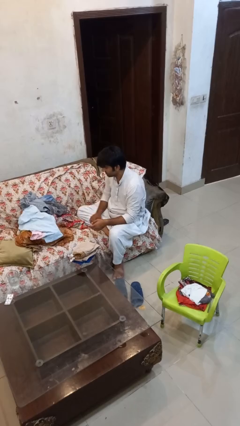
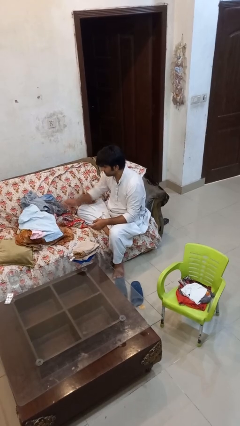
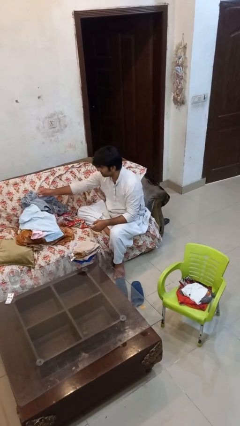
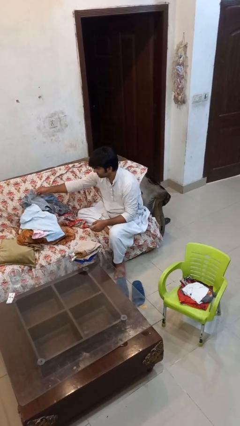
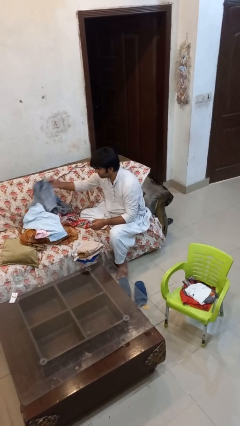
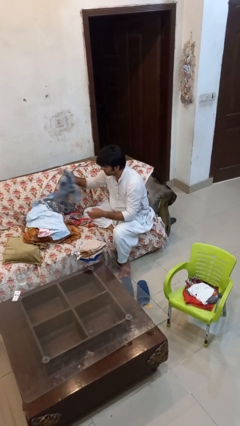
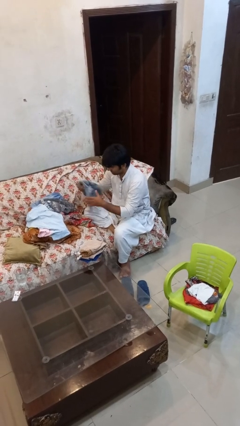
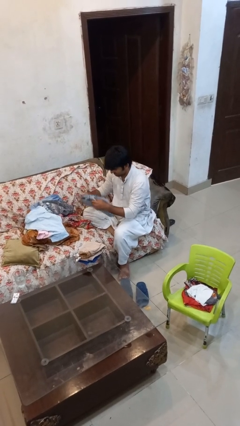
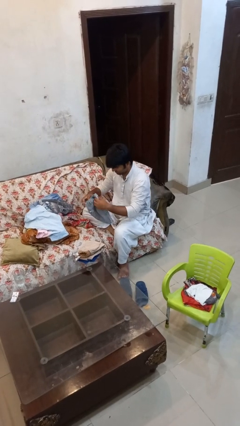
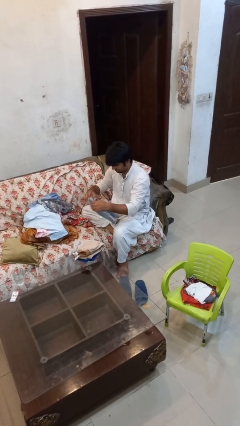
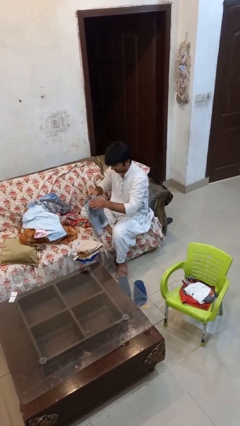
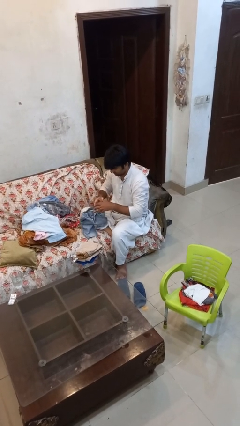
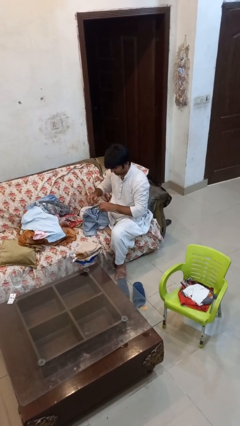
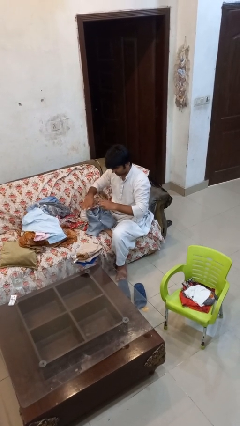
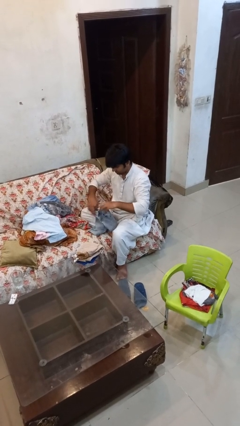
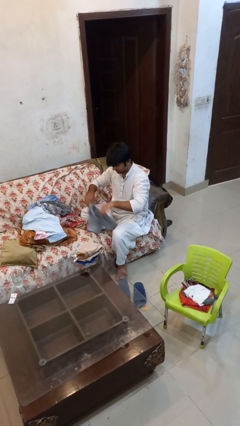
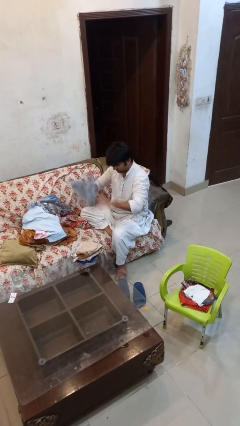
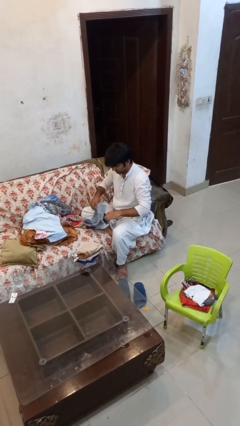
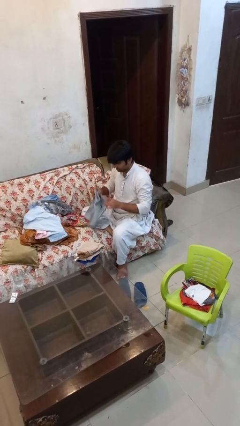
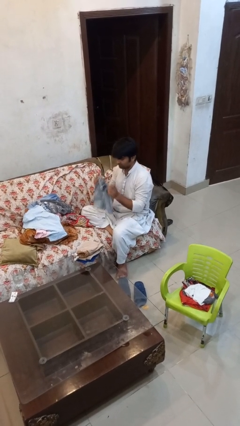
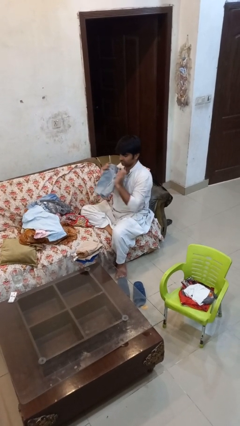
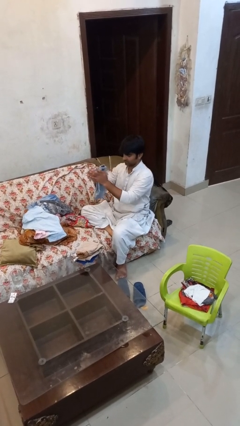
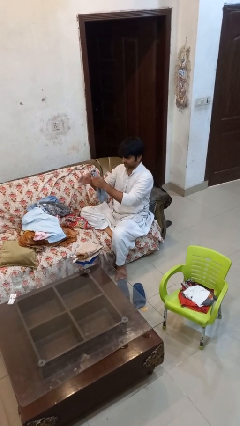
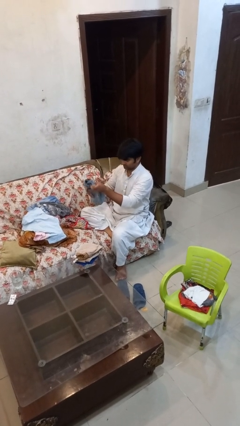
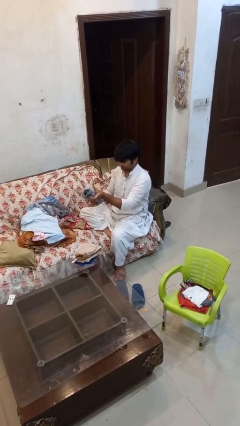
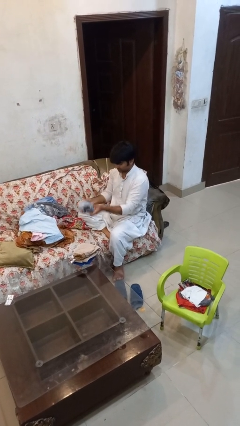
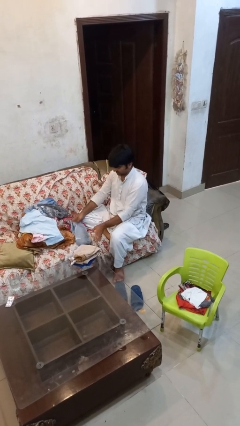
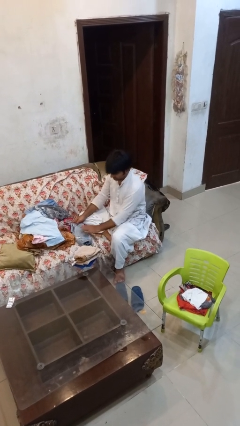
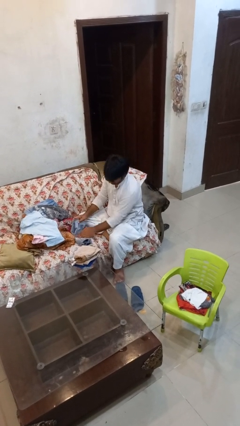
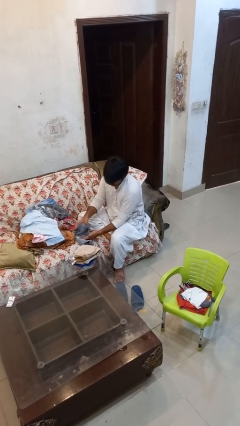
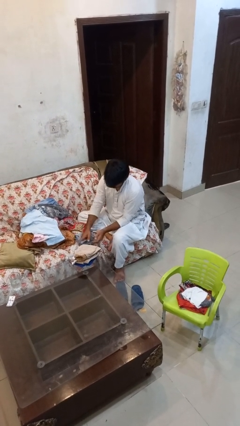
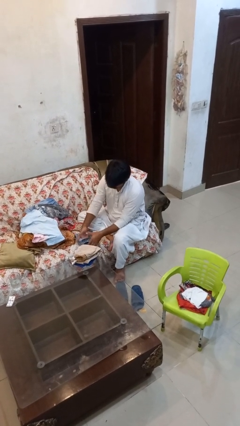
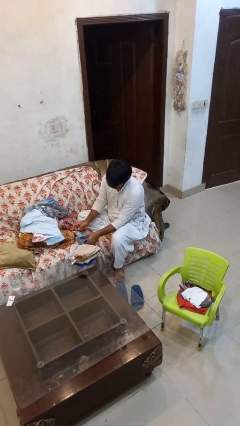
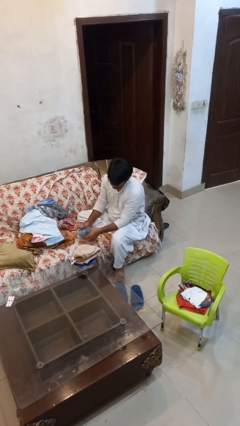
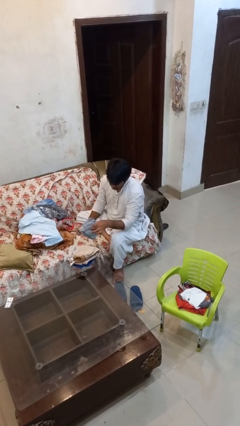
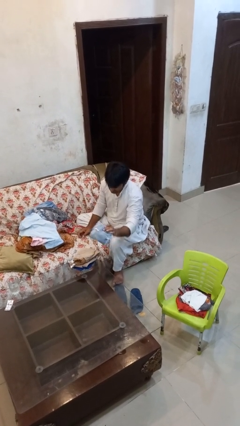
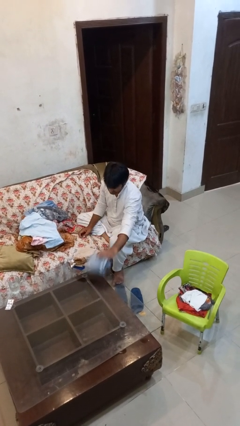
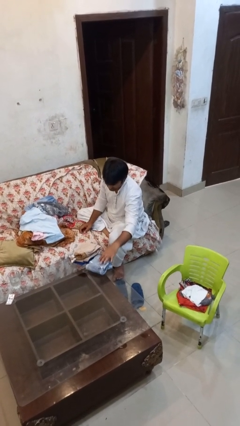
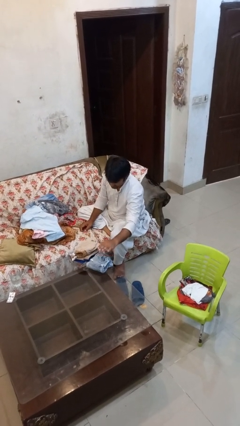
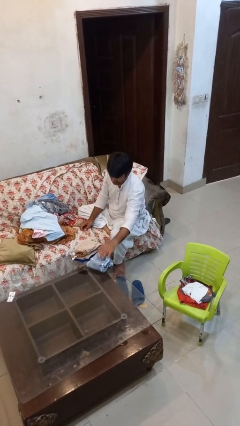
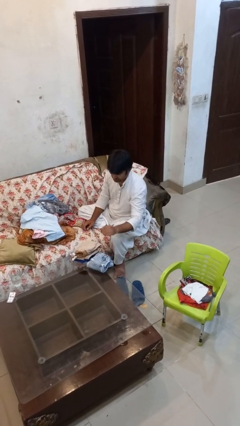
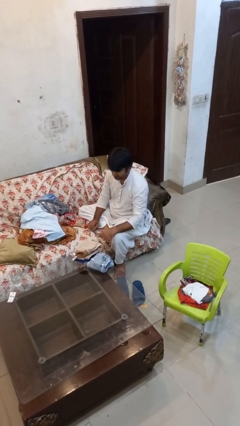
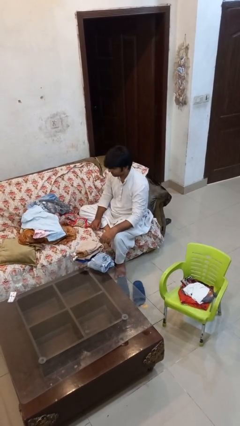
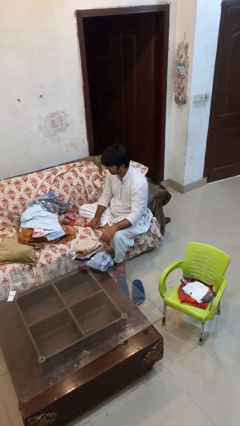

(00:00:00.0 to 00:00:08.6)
person folds pants

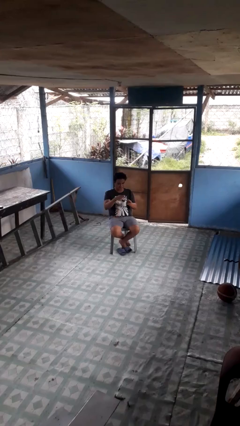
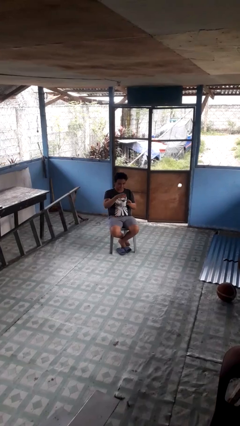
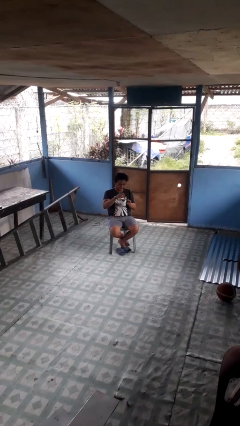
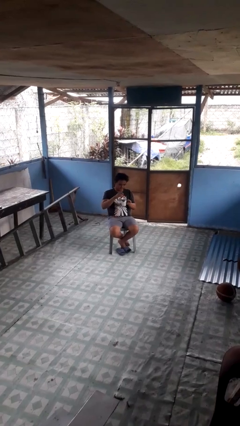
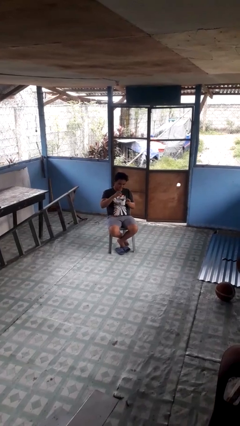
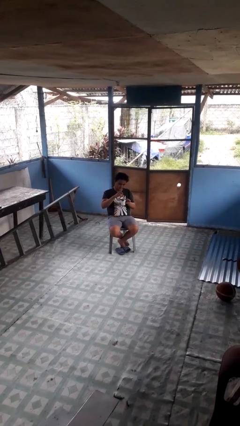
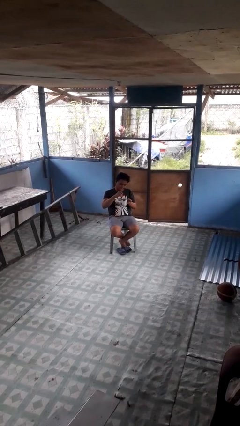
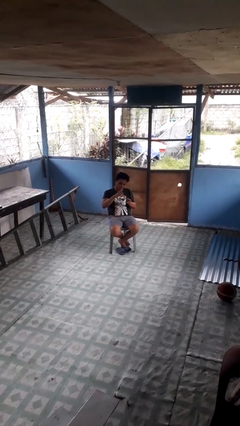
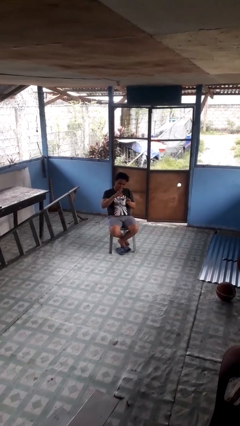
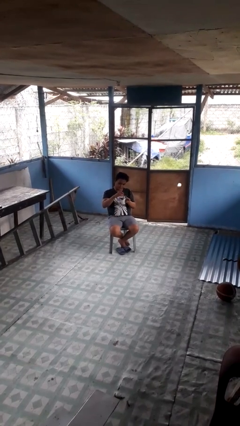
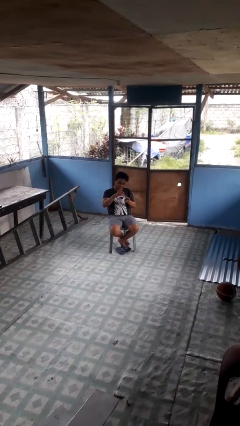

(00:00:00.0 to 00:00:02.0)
person stirs mug

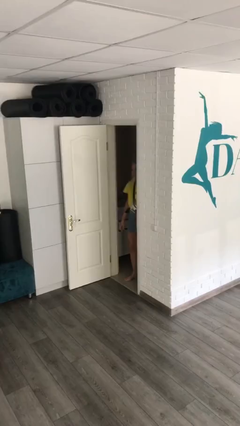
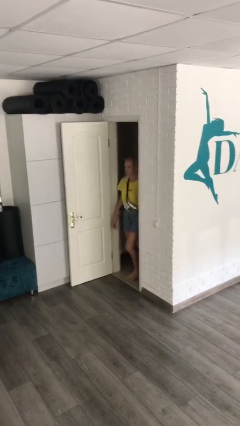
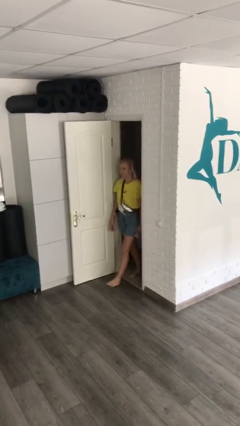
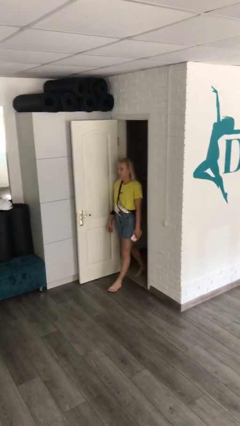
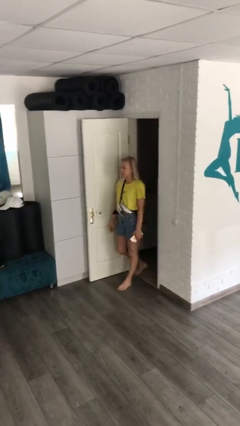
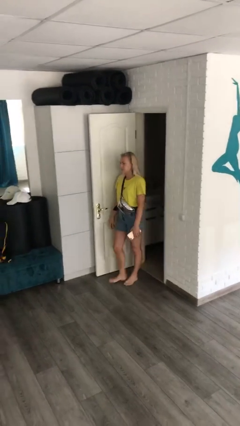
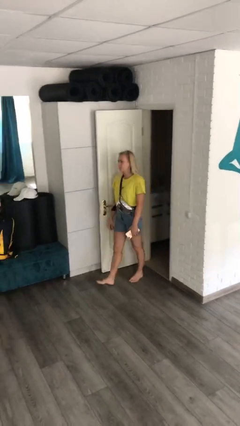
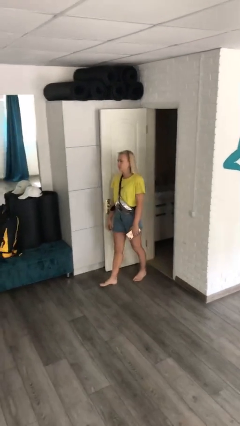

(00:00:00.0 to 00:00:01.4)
person enters scene through structure

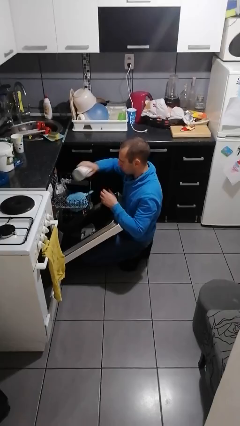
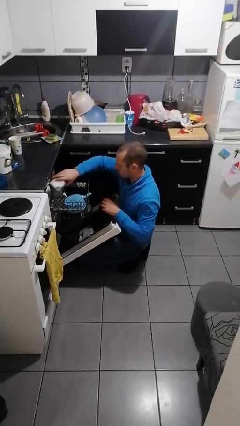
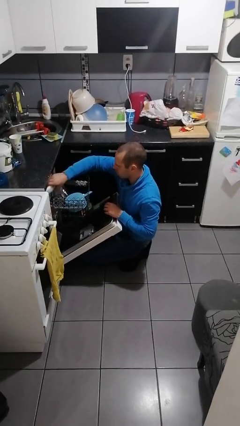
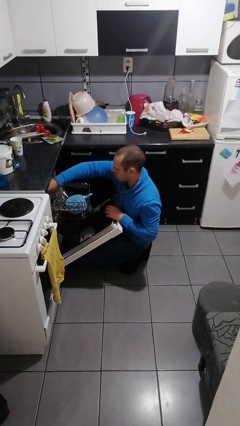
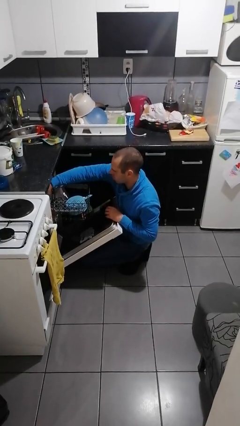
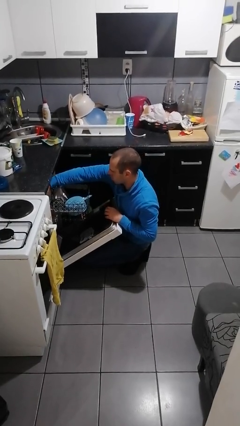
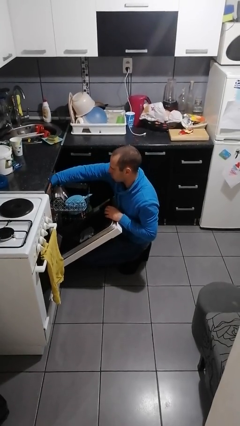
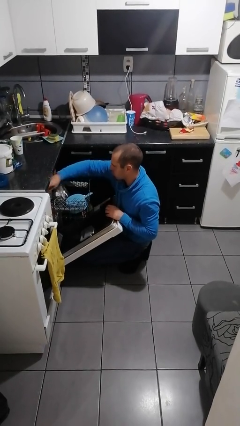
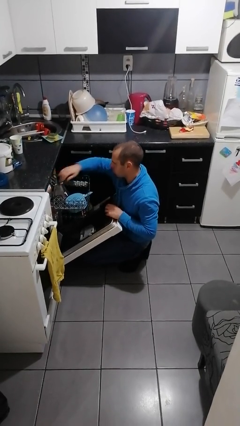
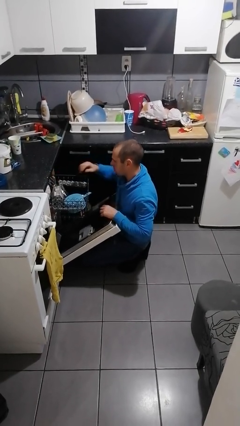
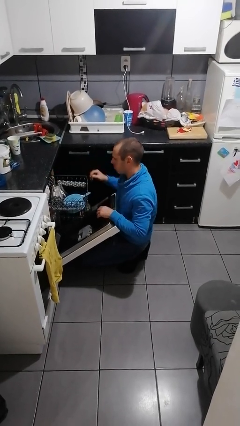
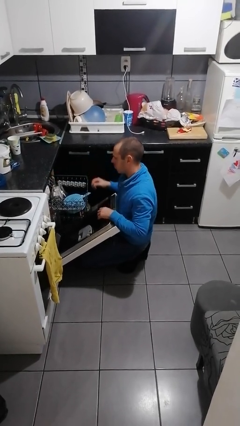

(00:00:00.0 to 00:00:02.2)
person loads dishwasher

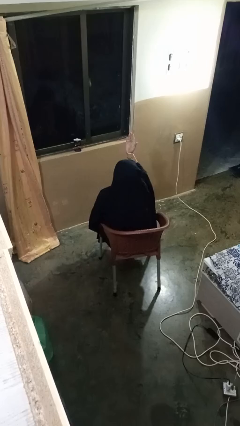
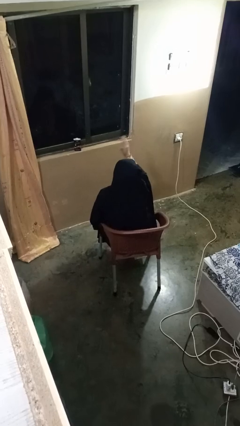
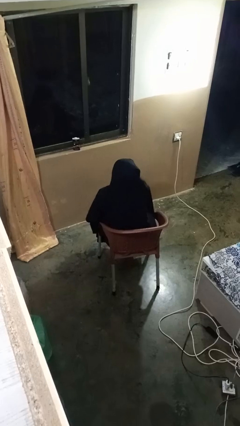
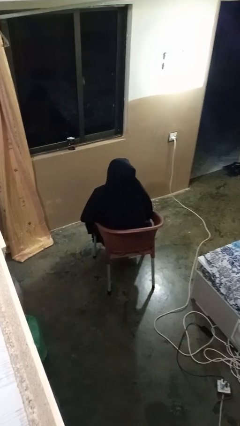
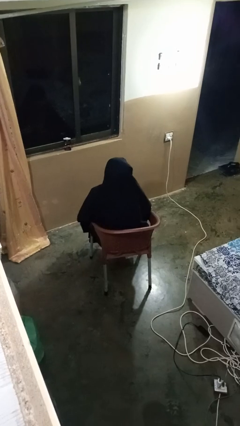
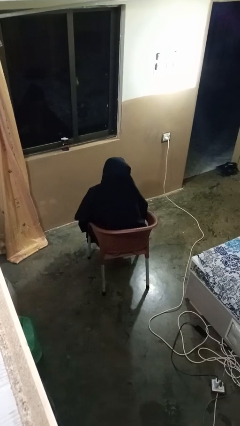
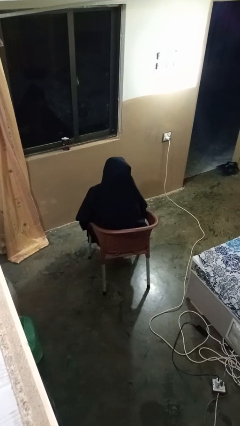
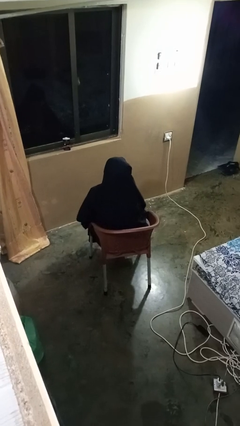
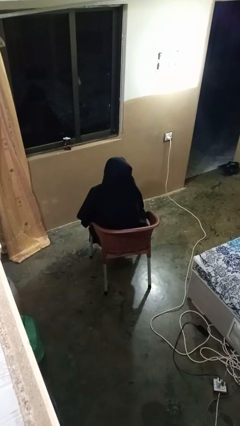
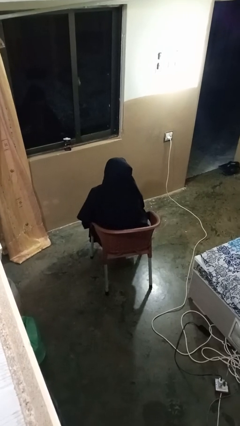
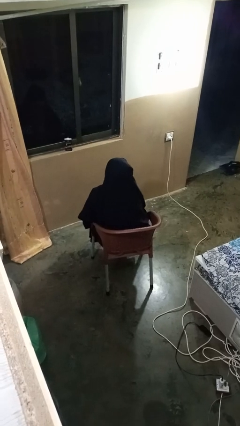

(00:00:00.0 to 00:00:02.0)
person gestures swipe down

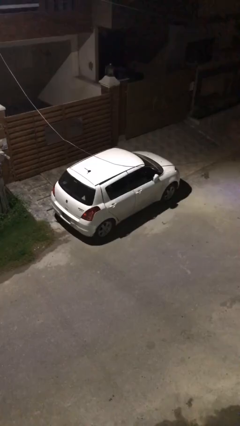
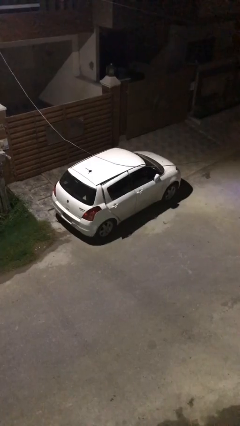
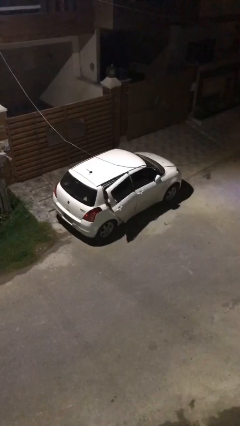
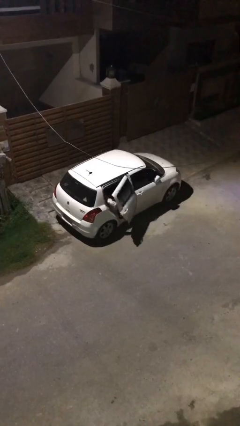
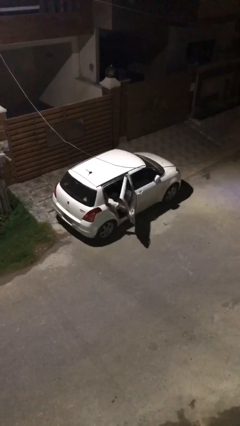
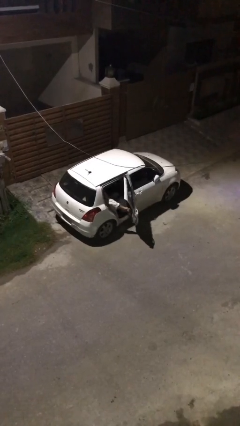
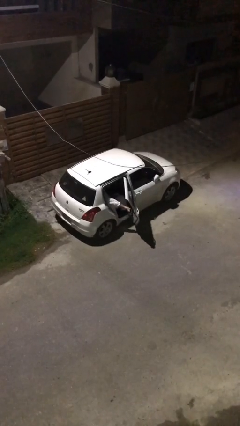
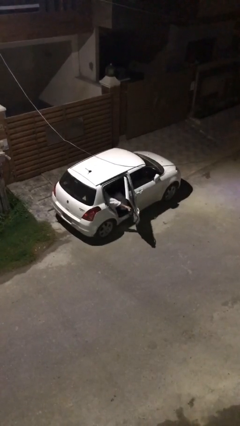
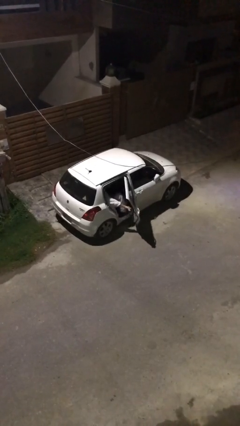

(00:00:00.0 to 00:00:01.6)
person opens car door
